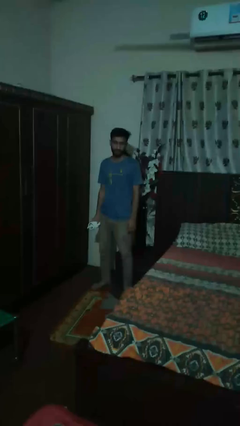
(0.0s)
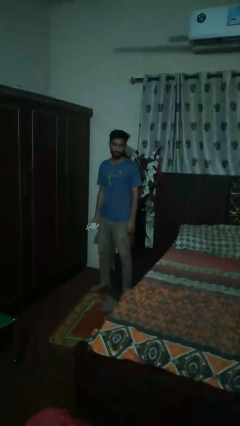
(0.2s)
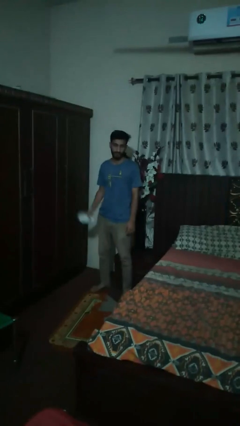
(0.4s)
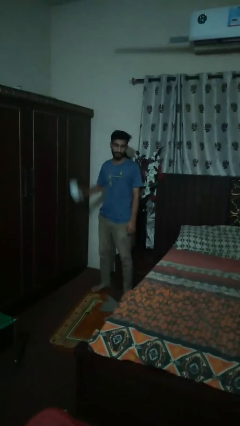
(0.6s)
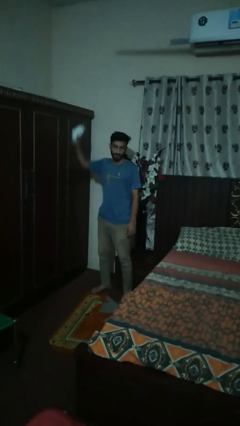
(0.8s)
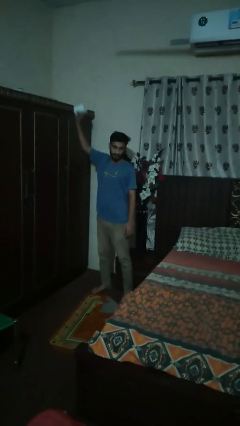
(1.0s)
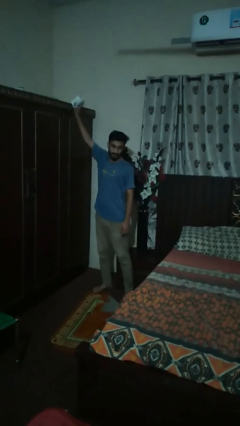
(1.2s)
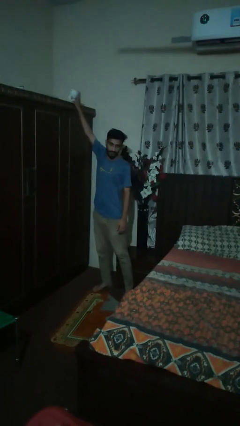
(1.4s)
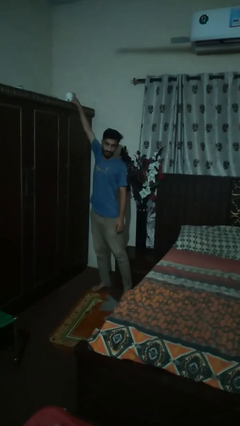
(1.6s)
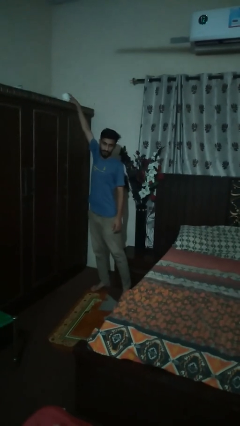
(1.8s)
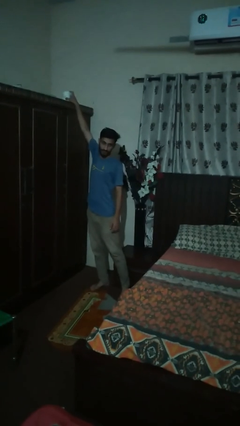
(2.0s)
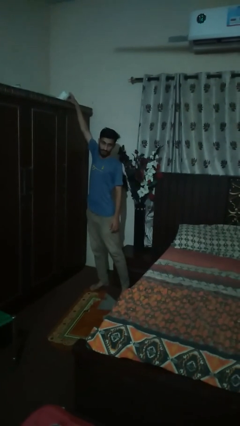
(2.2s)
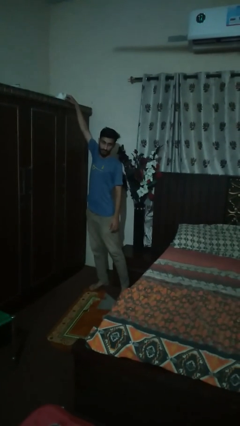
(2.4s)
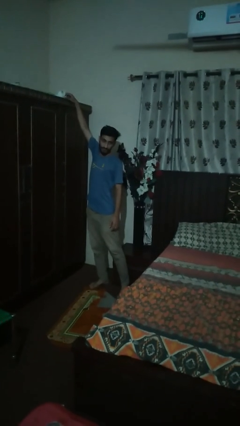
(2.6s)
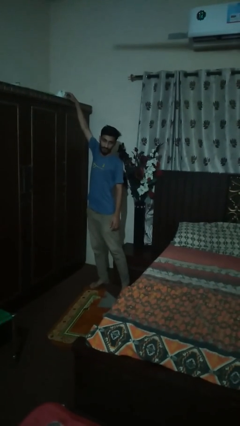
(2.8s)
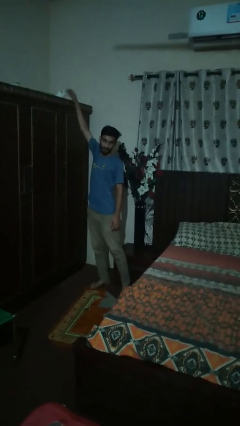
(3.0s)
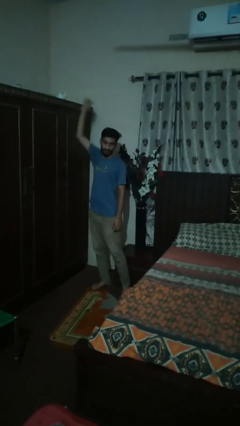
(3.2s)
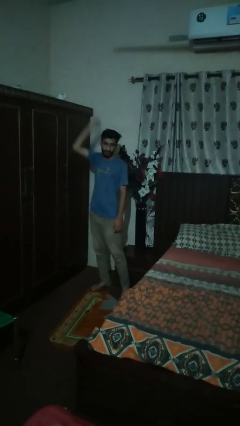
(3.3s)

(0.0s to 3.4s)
person picks up object from shelf

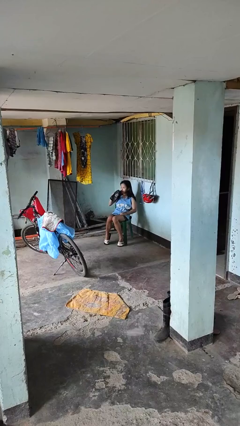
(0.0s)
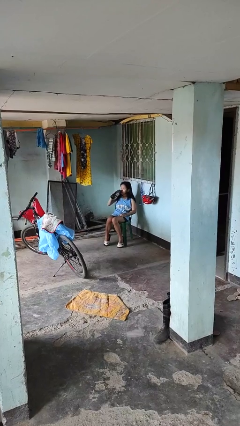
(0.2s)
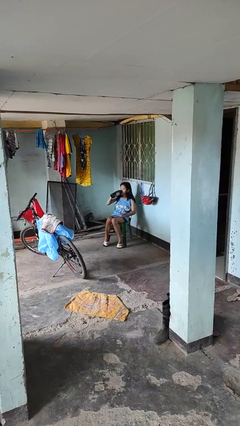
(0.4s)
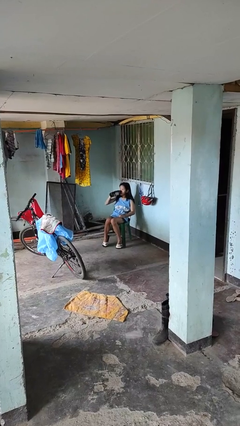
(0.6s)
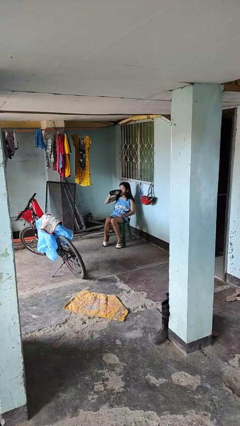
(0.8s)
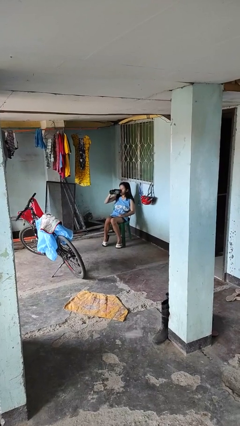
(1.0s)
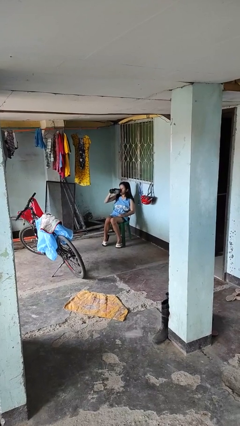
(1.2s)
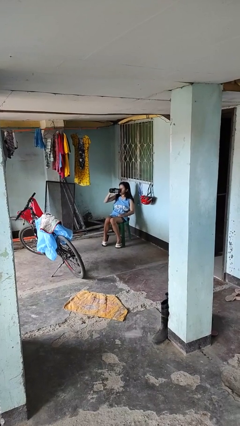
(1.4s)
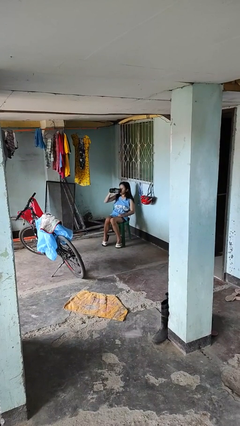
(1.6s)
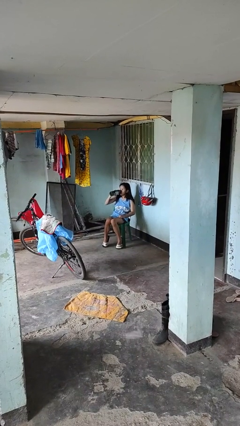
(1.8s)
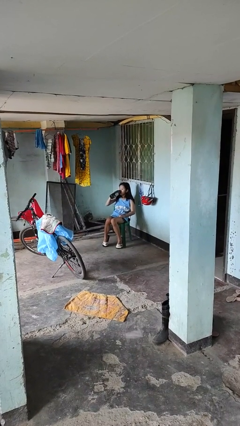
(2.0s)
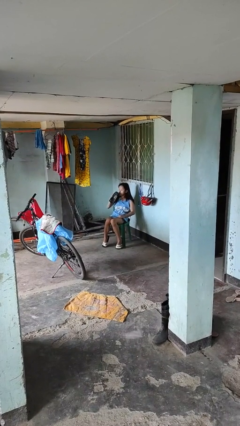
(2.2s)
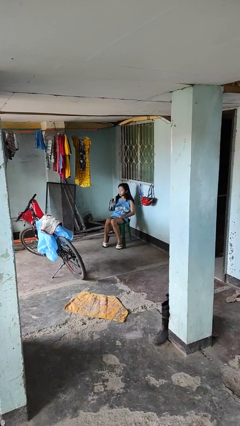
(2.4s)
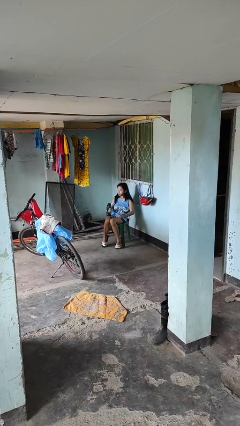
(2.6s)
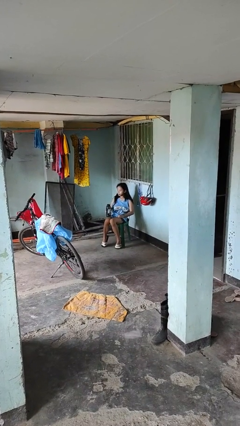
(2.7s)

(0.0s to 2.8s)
person drinks from bottle

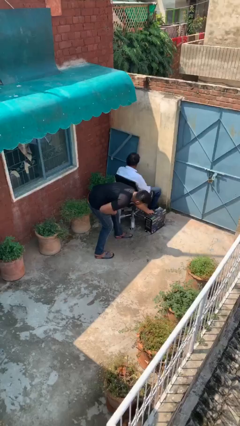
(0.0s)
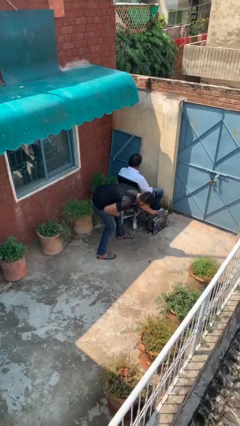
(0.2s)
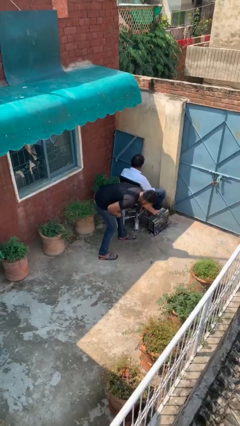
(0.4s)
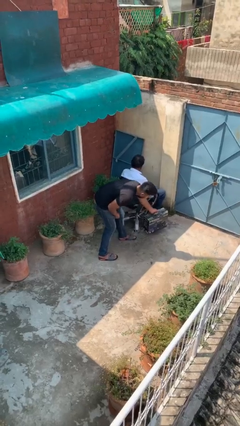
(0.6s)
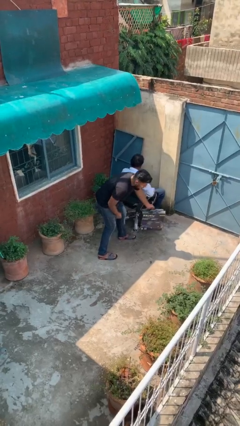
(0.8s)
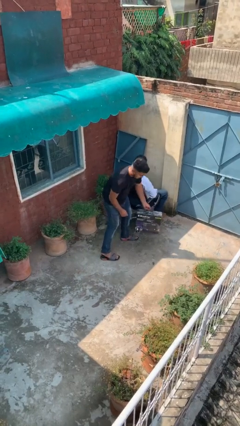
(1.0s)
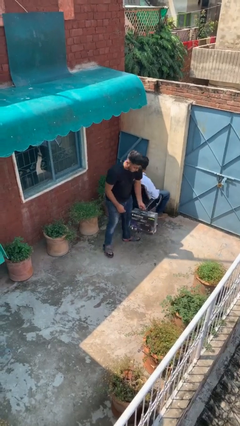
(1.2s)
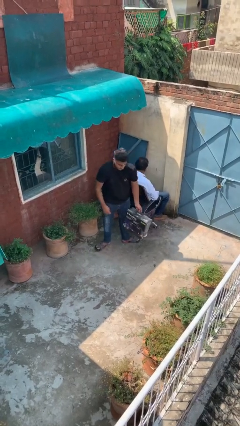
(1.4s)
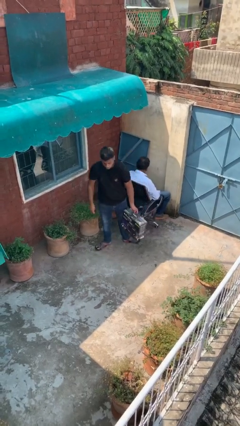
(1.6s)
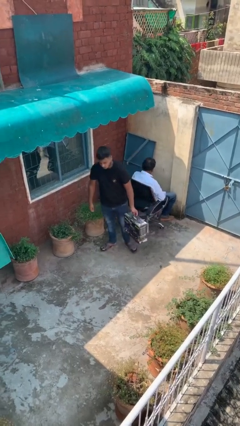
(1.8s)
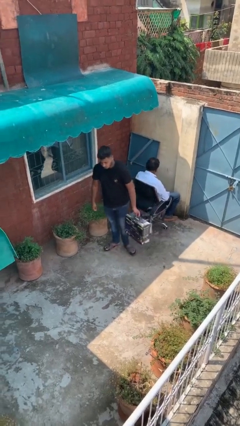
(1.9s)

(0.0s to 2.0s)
person steals object from person

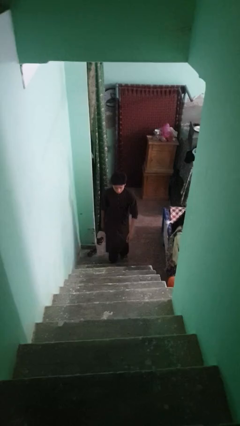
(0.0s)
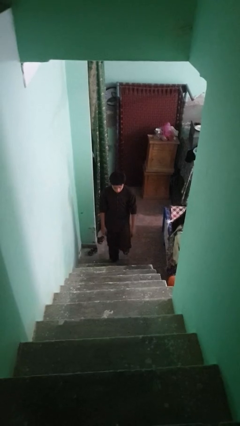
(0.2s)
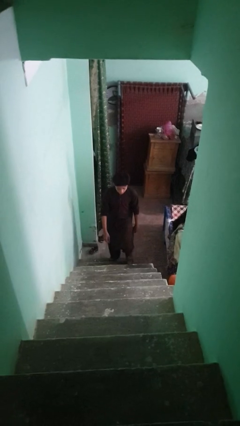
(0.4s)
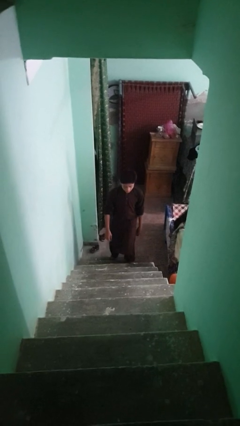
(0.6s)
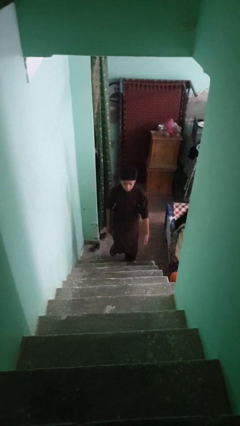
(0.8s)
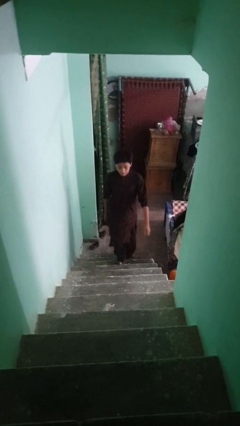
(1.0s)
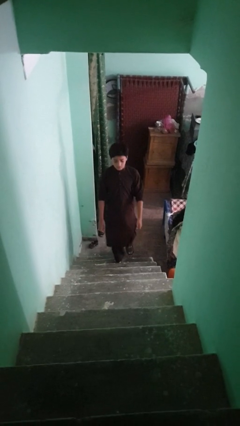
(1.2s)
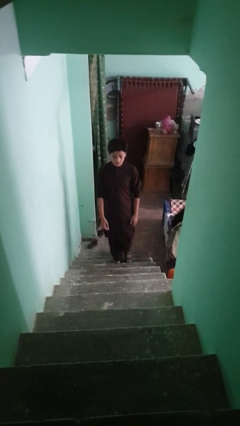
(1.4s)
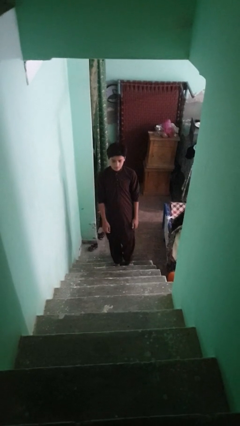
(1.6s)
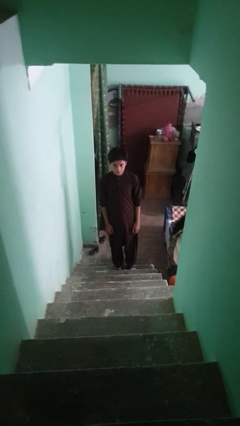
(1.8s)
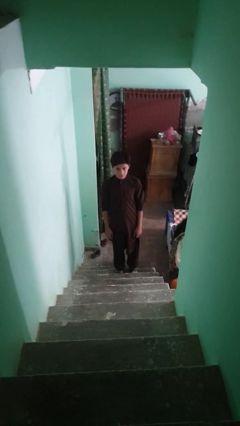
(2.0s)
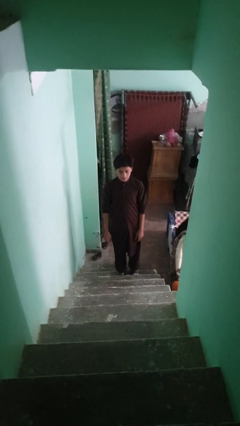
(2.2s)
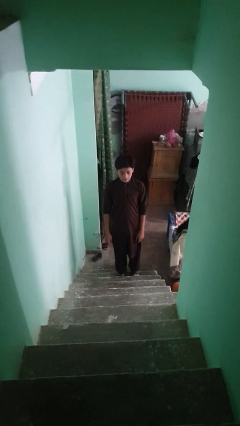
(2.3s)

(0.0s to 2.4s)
person climbs up stairs

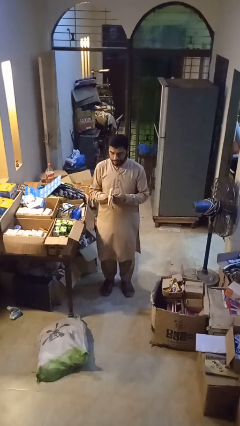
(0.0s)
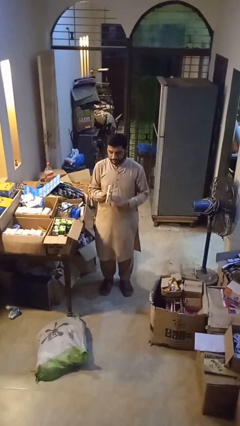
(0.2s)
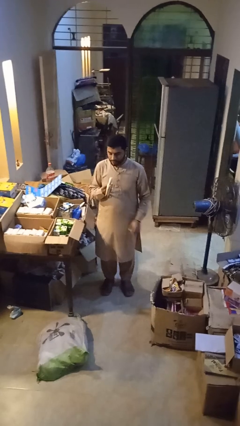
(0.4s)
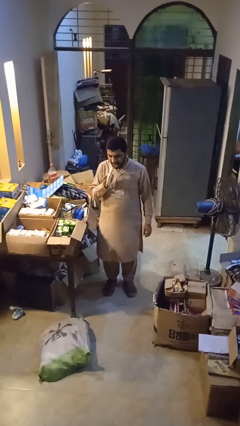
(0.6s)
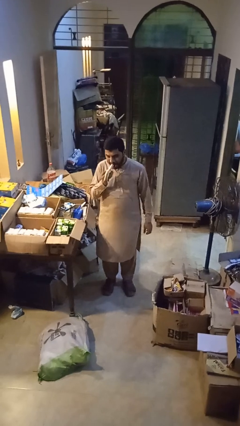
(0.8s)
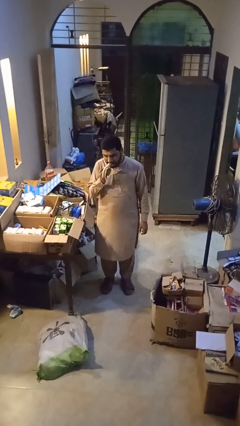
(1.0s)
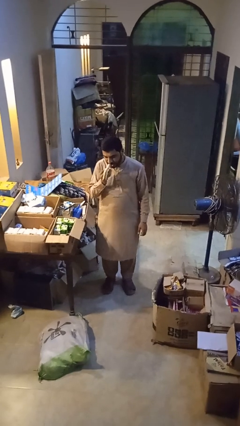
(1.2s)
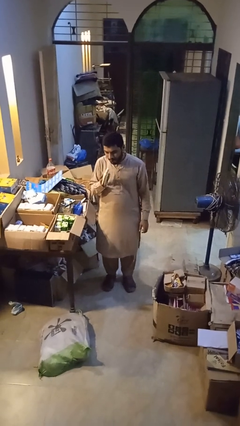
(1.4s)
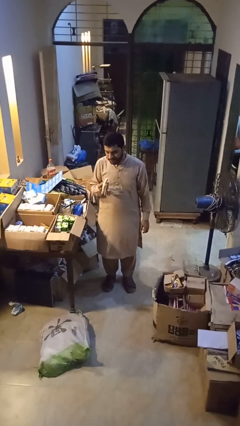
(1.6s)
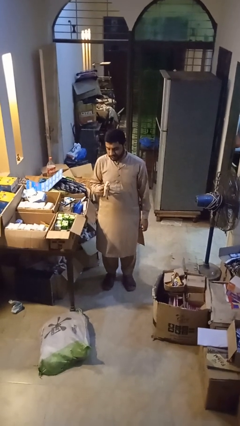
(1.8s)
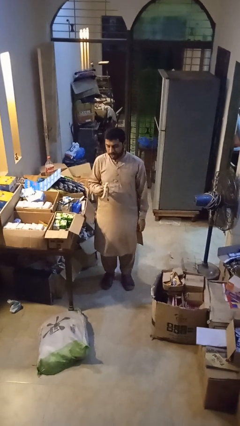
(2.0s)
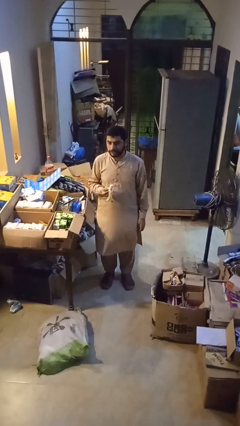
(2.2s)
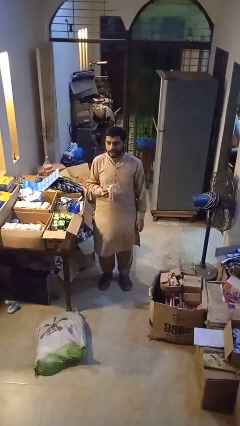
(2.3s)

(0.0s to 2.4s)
person eats banana

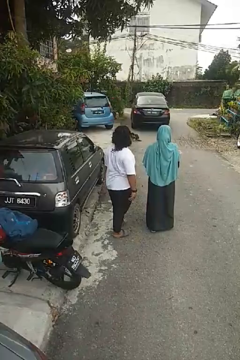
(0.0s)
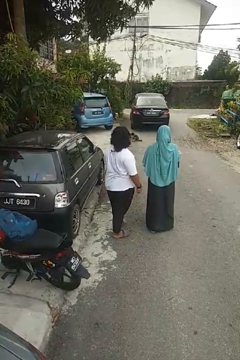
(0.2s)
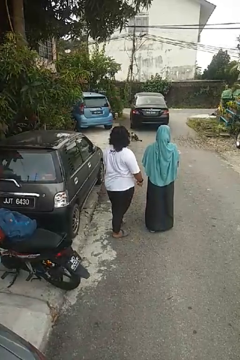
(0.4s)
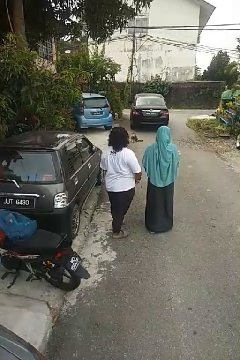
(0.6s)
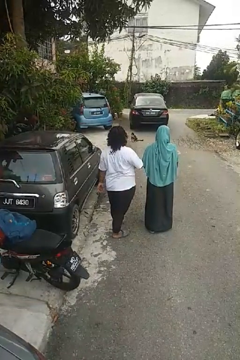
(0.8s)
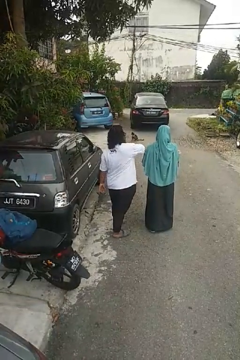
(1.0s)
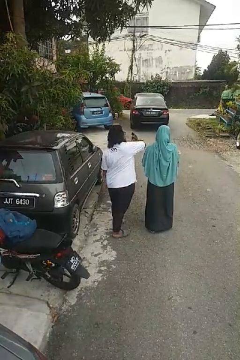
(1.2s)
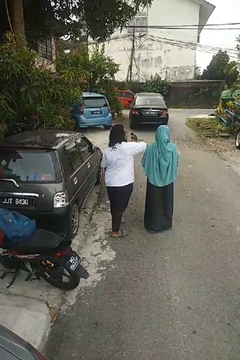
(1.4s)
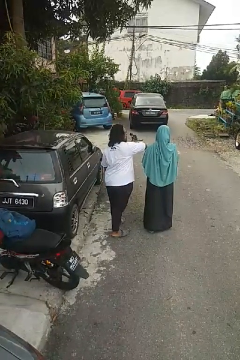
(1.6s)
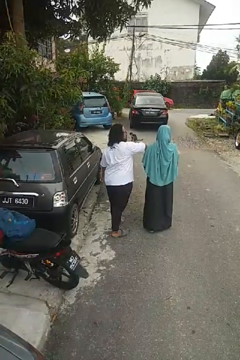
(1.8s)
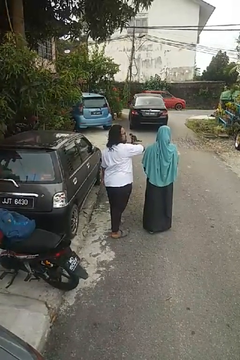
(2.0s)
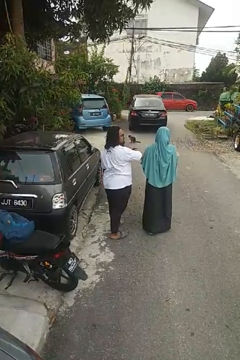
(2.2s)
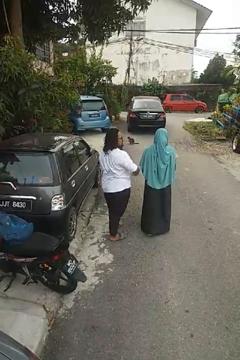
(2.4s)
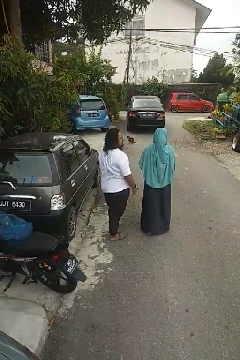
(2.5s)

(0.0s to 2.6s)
person nudges person with elbow

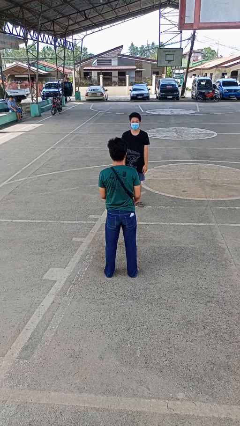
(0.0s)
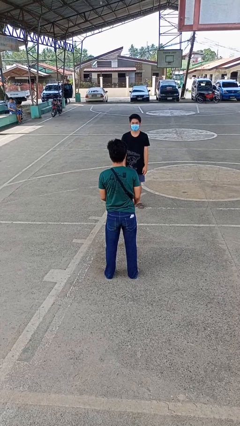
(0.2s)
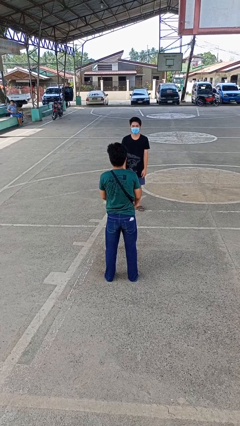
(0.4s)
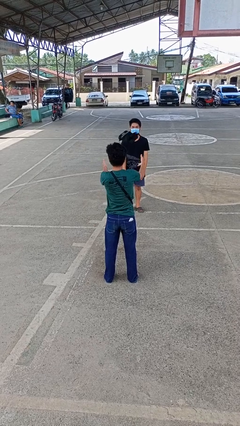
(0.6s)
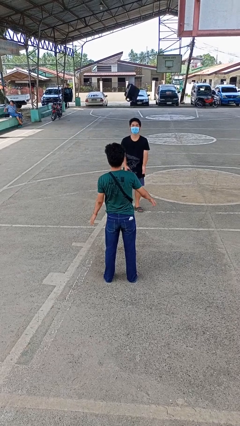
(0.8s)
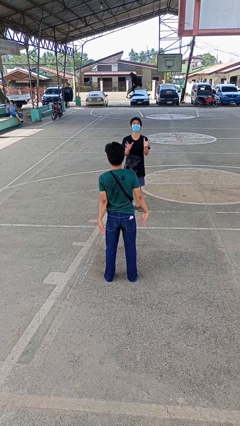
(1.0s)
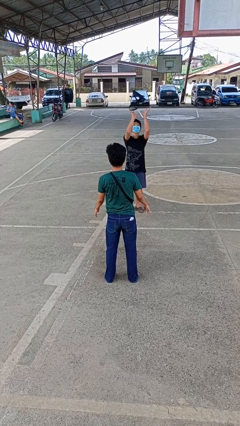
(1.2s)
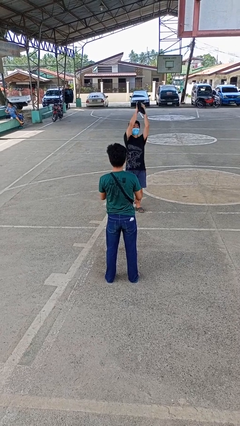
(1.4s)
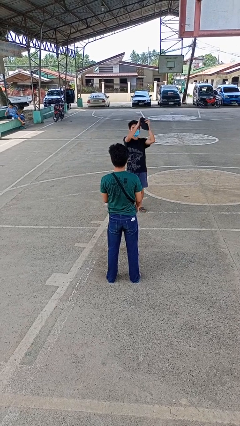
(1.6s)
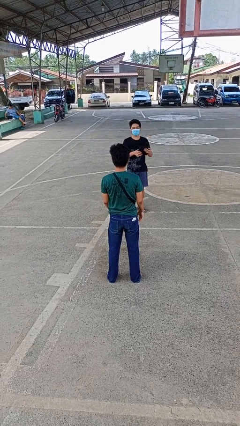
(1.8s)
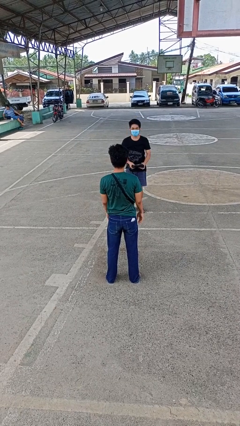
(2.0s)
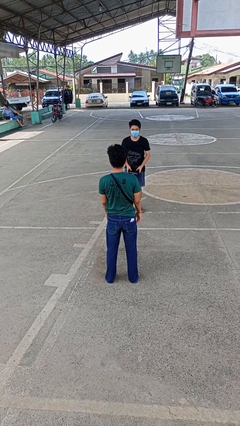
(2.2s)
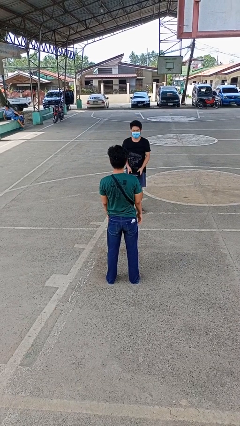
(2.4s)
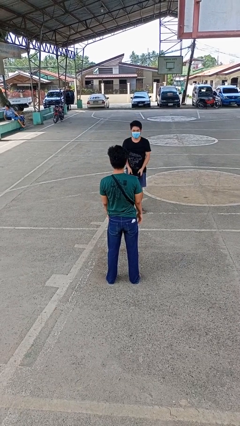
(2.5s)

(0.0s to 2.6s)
person throws object to person
